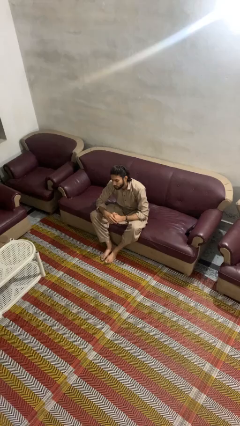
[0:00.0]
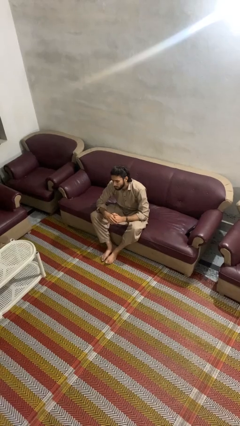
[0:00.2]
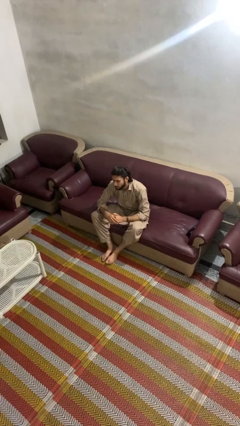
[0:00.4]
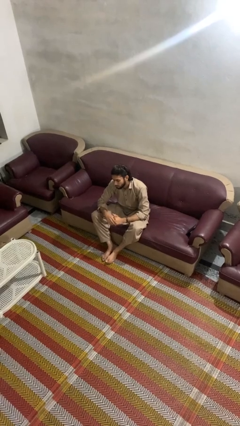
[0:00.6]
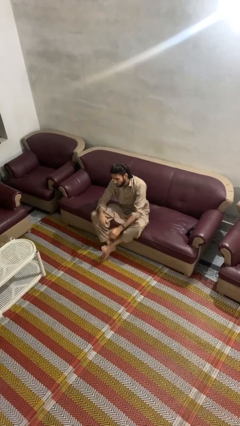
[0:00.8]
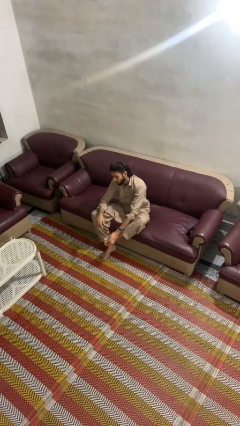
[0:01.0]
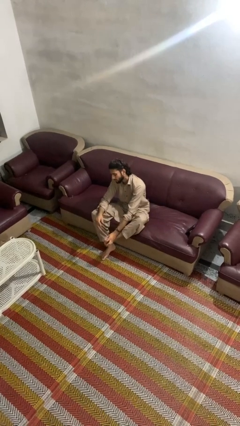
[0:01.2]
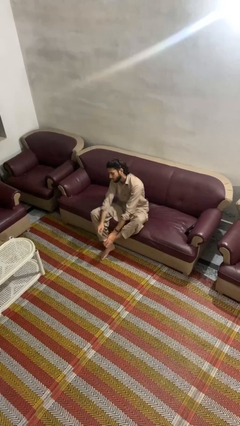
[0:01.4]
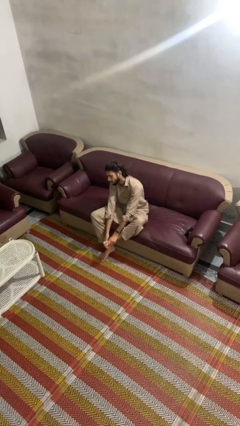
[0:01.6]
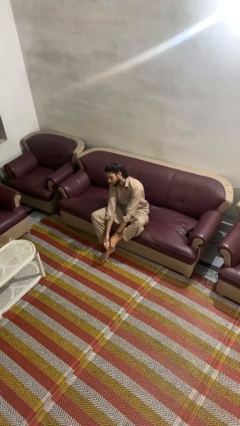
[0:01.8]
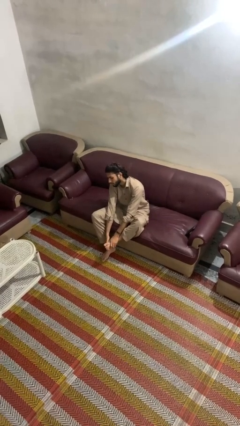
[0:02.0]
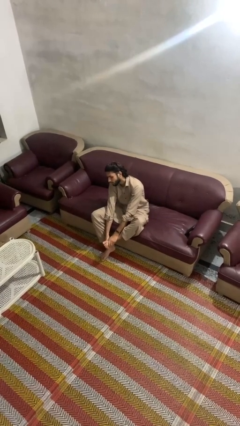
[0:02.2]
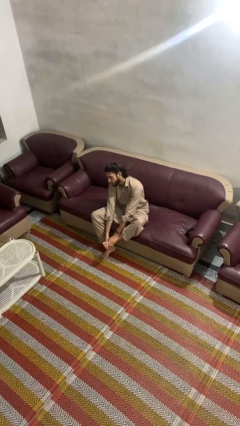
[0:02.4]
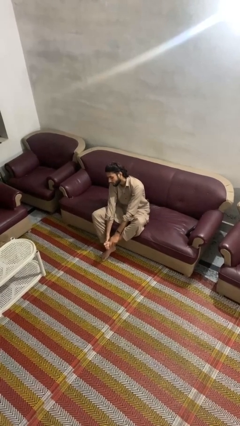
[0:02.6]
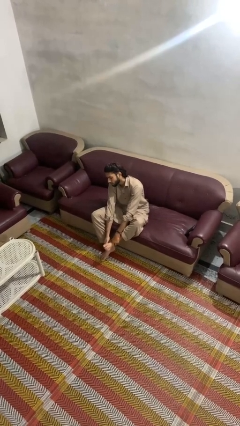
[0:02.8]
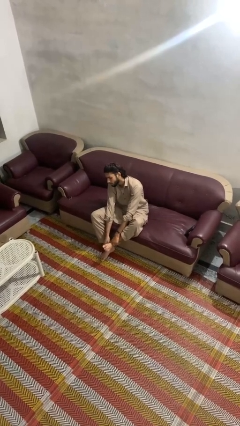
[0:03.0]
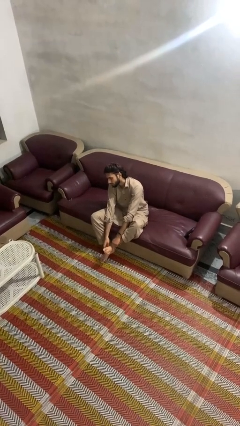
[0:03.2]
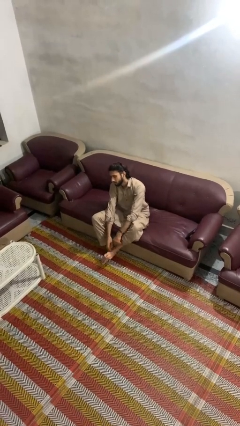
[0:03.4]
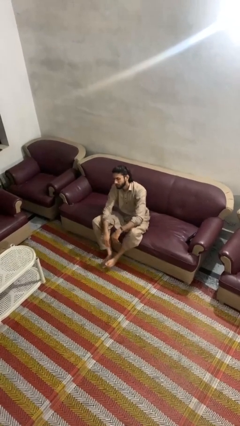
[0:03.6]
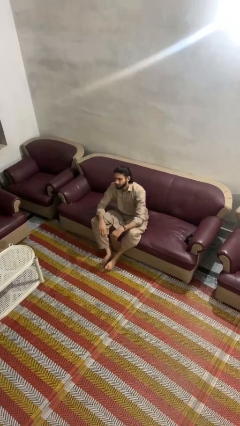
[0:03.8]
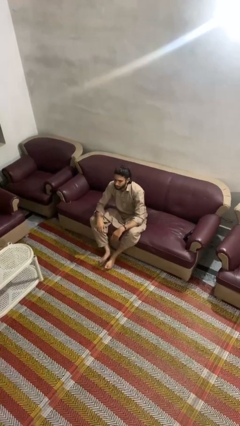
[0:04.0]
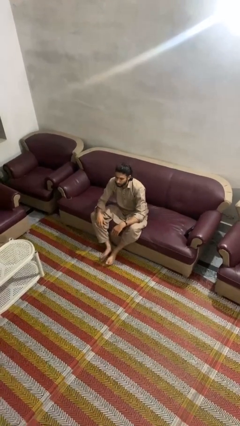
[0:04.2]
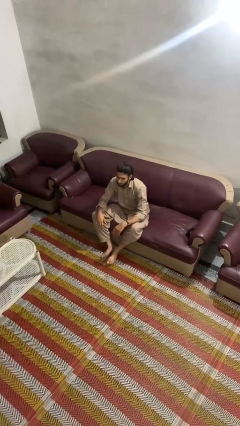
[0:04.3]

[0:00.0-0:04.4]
person rubs foot

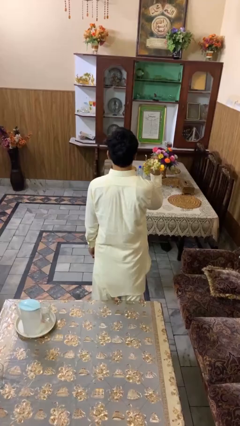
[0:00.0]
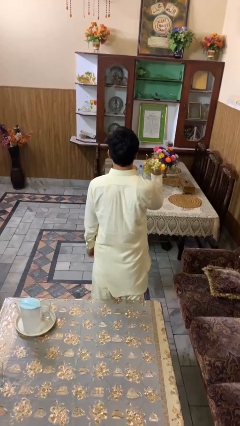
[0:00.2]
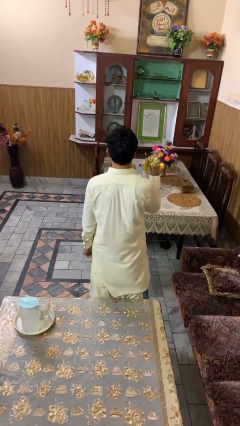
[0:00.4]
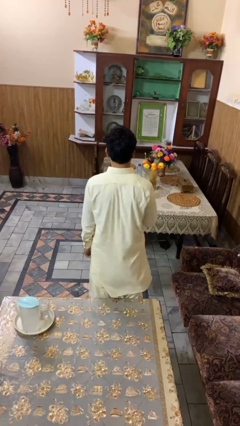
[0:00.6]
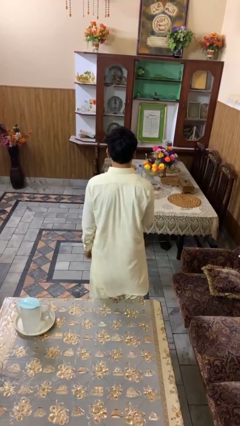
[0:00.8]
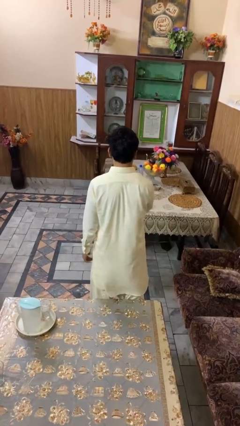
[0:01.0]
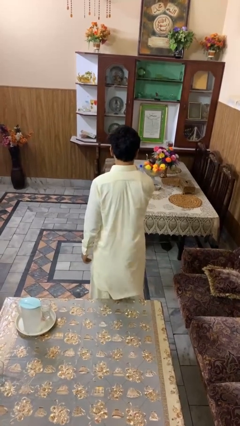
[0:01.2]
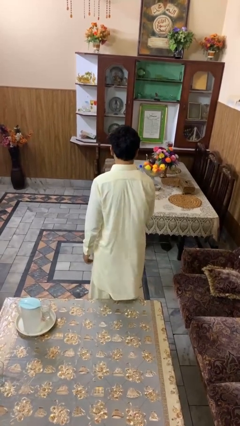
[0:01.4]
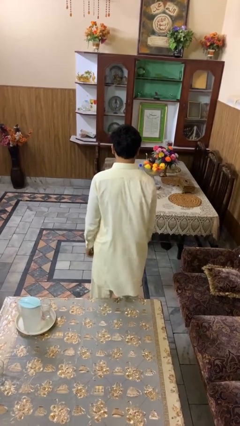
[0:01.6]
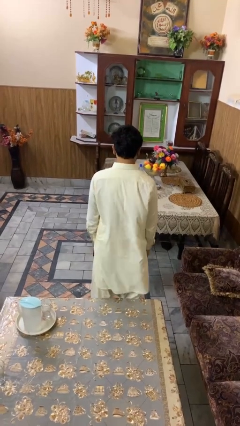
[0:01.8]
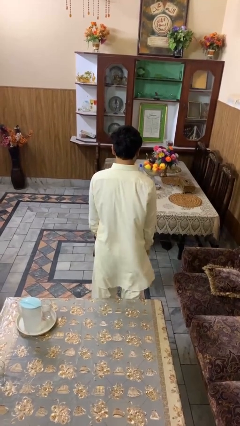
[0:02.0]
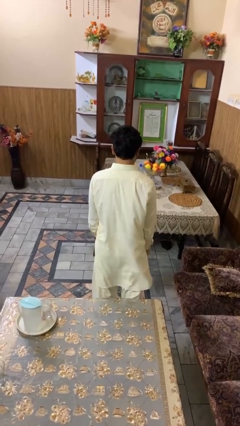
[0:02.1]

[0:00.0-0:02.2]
person throws object on table

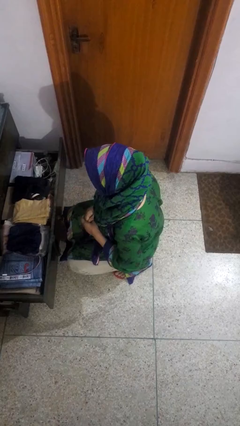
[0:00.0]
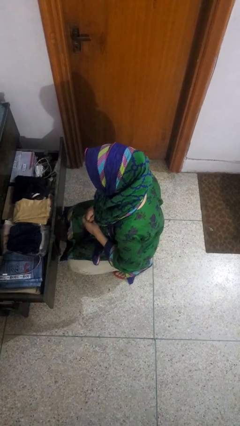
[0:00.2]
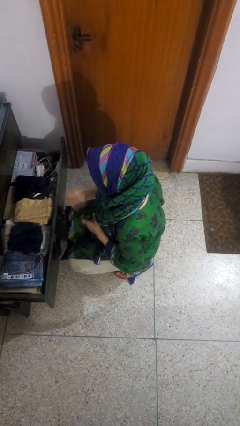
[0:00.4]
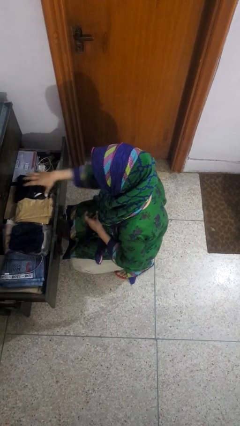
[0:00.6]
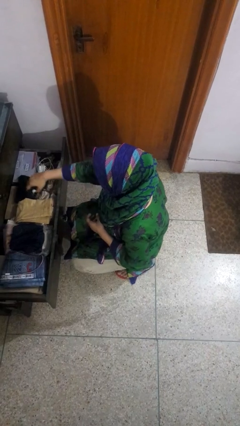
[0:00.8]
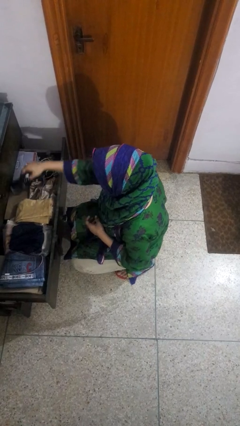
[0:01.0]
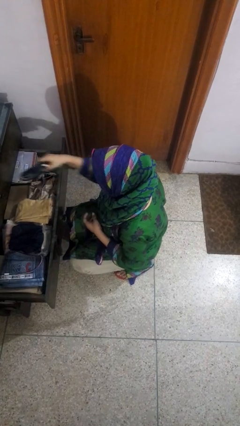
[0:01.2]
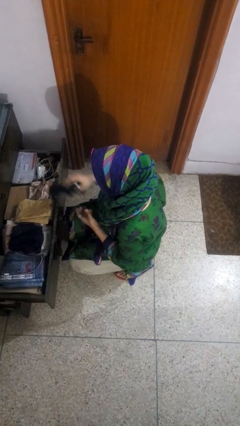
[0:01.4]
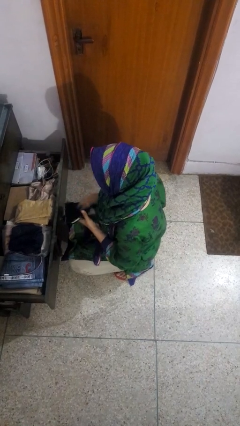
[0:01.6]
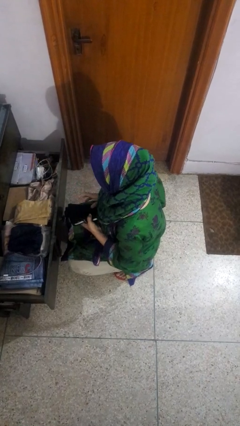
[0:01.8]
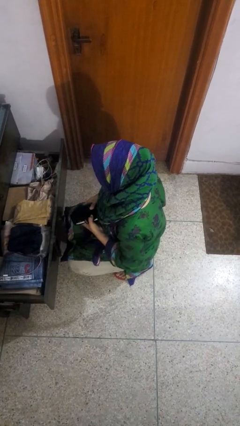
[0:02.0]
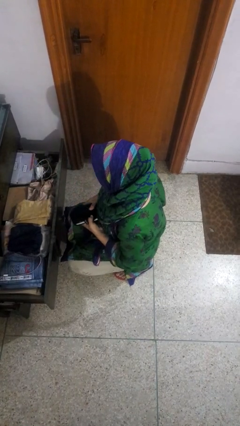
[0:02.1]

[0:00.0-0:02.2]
person takes clothes from dresser

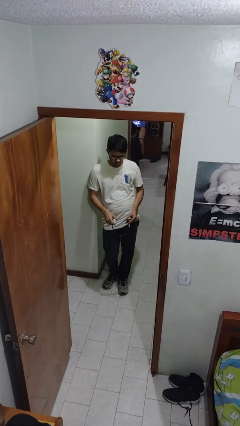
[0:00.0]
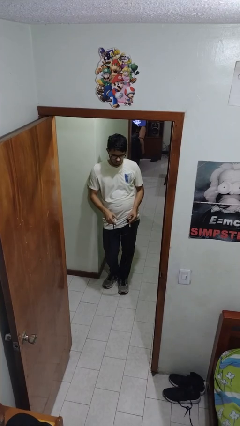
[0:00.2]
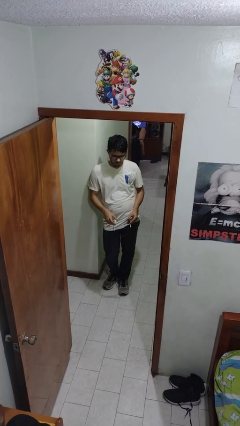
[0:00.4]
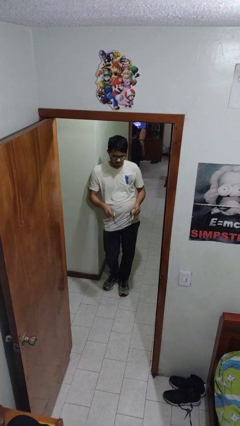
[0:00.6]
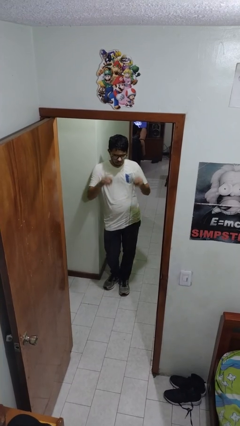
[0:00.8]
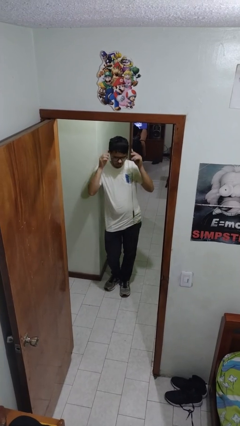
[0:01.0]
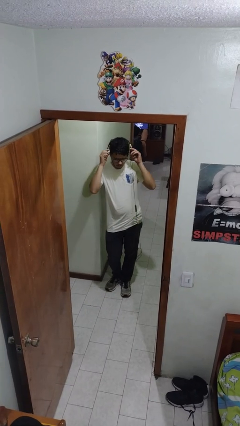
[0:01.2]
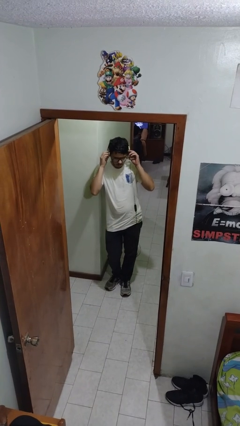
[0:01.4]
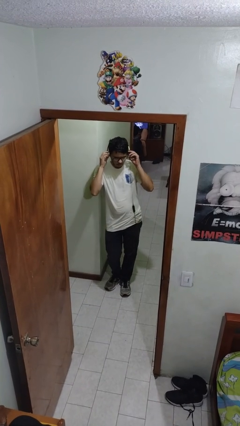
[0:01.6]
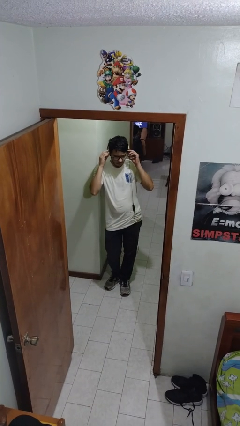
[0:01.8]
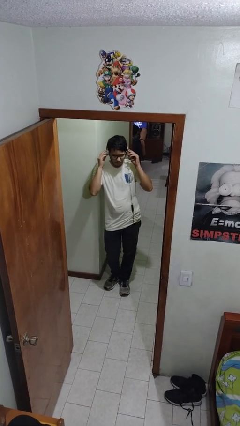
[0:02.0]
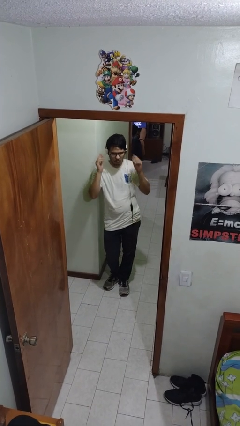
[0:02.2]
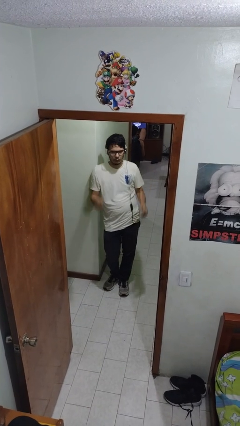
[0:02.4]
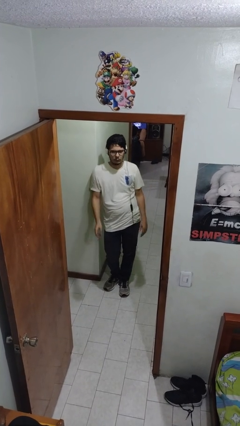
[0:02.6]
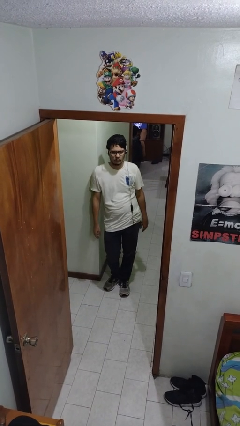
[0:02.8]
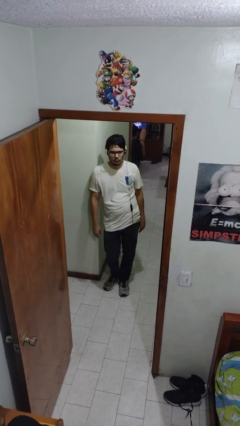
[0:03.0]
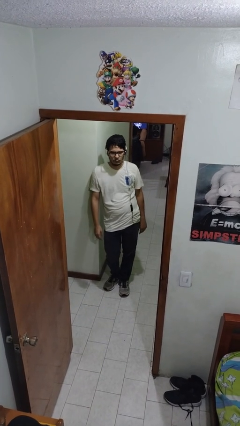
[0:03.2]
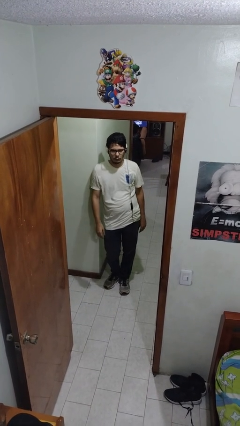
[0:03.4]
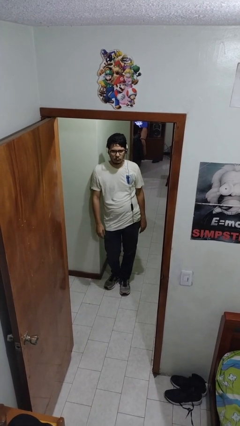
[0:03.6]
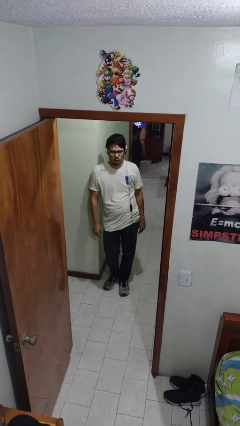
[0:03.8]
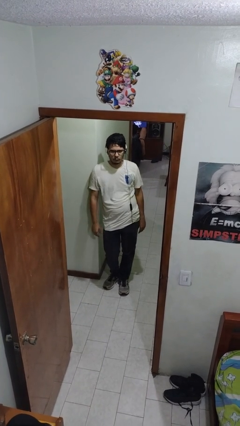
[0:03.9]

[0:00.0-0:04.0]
person puts on headphones

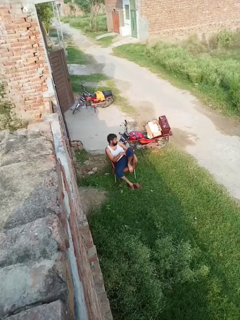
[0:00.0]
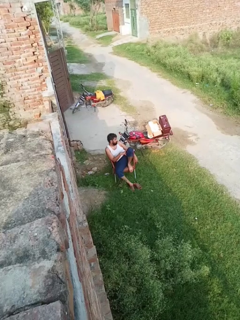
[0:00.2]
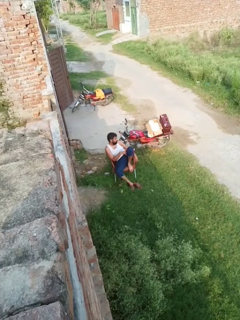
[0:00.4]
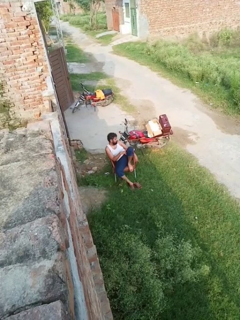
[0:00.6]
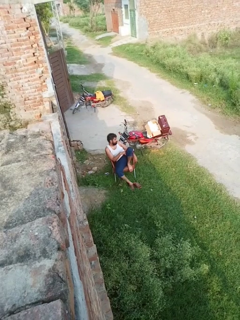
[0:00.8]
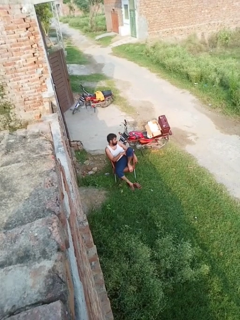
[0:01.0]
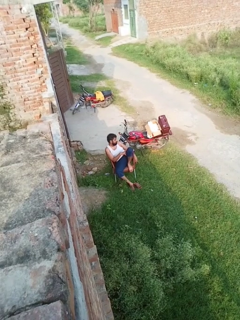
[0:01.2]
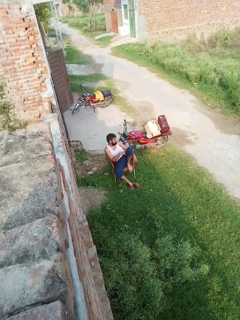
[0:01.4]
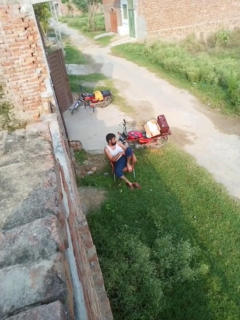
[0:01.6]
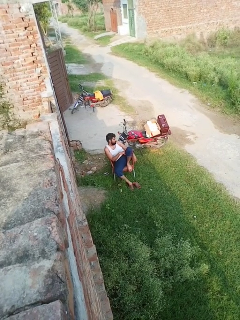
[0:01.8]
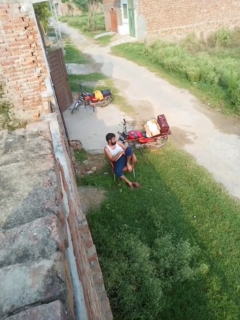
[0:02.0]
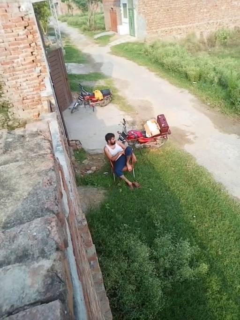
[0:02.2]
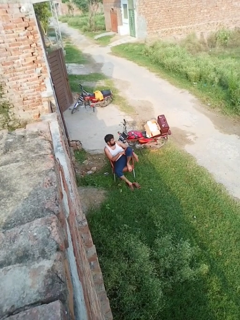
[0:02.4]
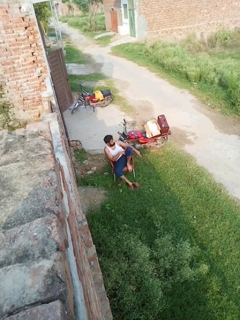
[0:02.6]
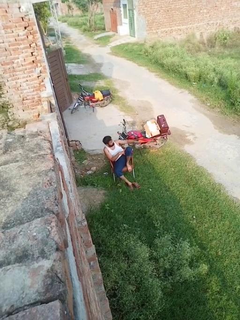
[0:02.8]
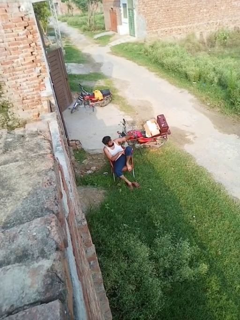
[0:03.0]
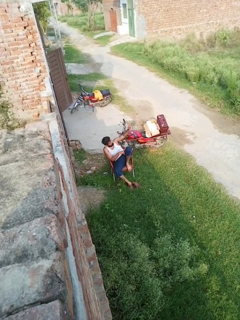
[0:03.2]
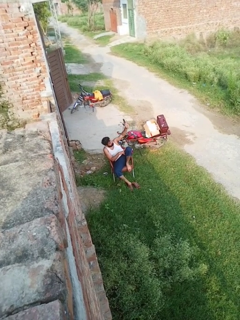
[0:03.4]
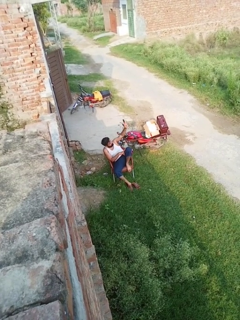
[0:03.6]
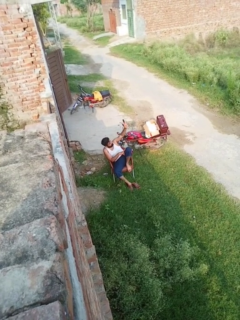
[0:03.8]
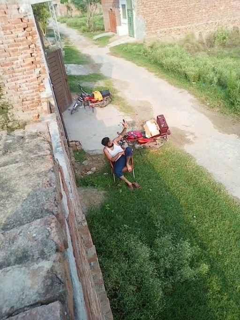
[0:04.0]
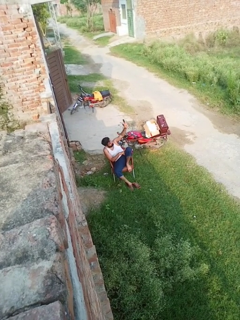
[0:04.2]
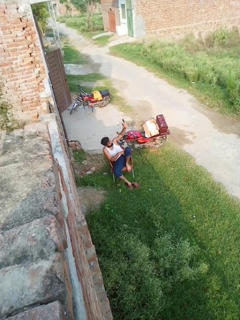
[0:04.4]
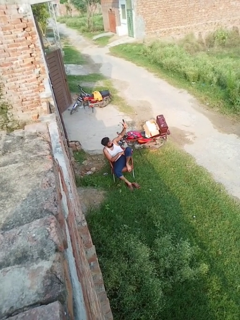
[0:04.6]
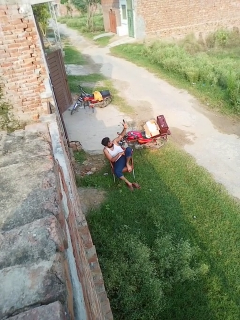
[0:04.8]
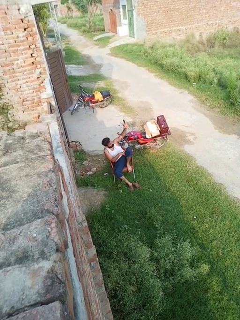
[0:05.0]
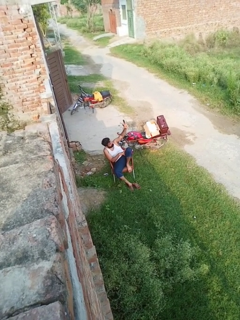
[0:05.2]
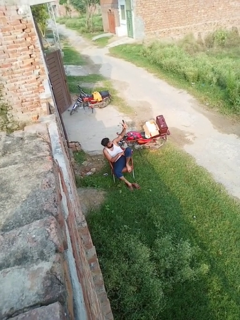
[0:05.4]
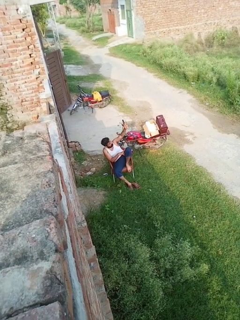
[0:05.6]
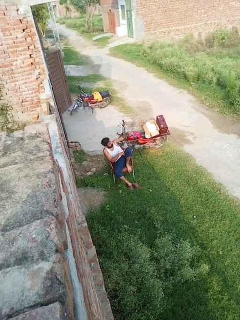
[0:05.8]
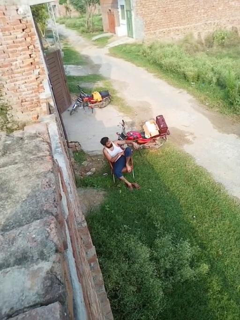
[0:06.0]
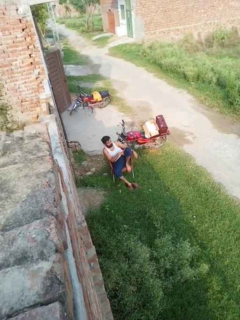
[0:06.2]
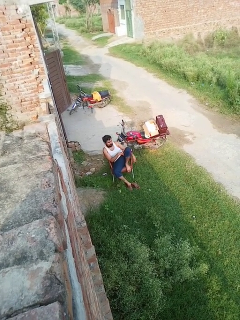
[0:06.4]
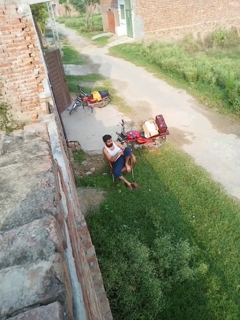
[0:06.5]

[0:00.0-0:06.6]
person gestures peace
